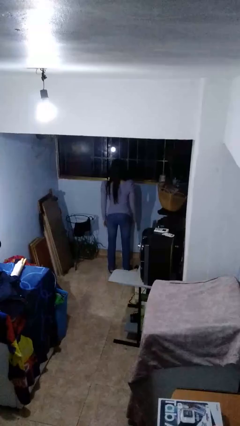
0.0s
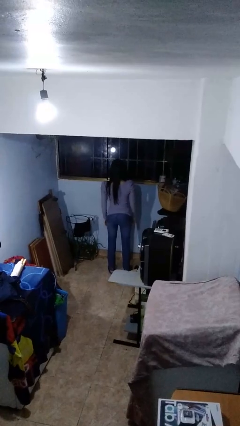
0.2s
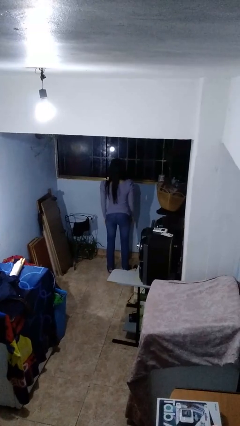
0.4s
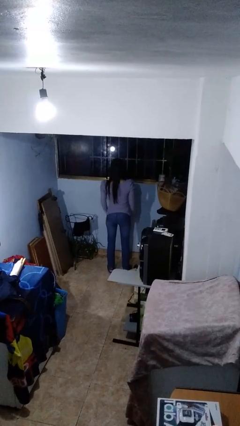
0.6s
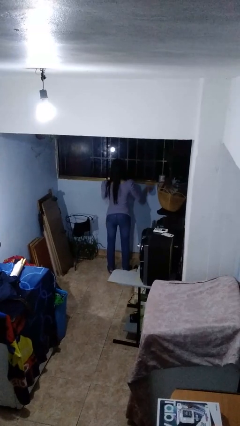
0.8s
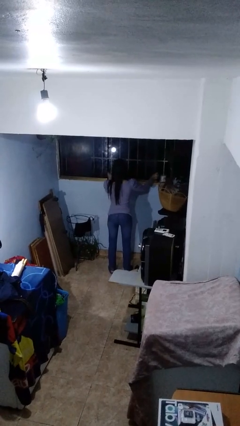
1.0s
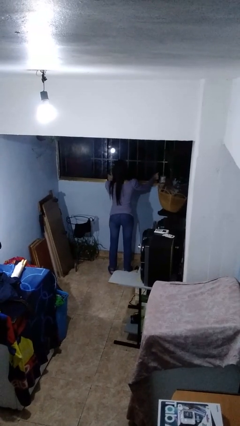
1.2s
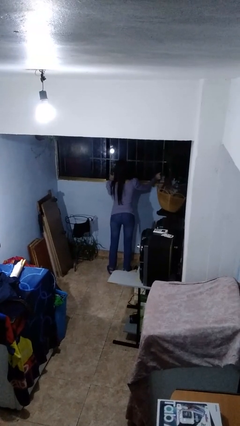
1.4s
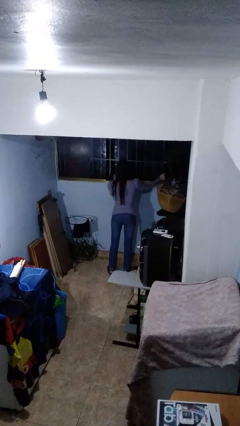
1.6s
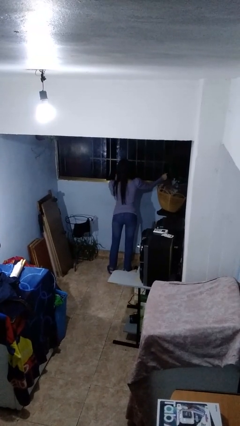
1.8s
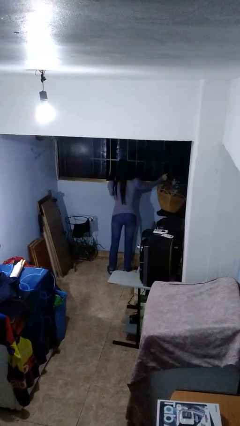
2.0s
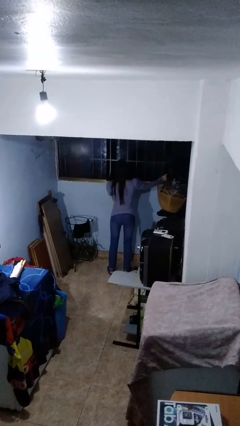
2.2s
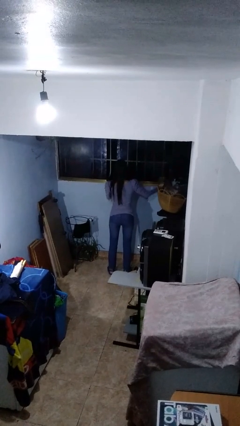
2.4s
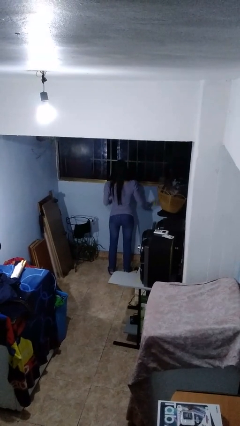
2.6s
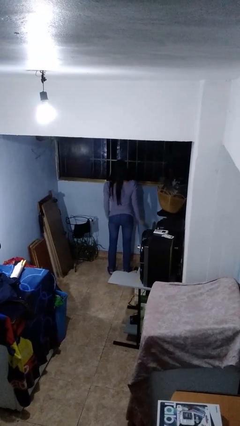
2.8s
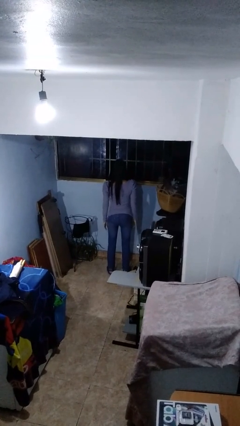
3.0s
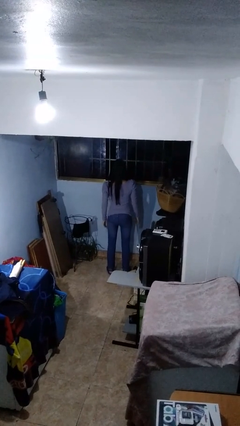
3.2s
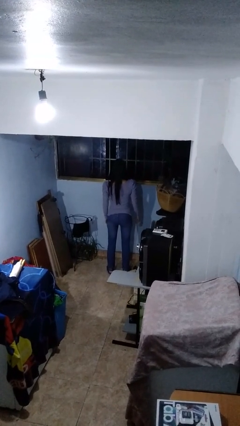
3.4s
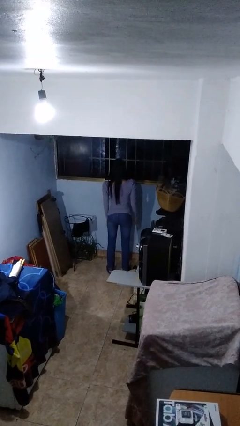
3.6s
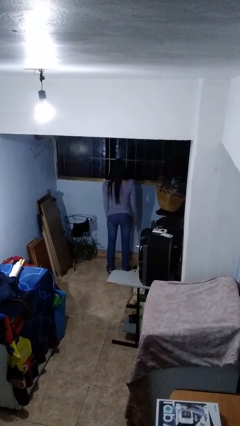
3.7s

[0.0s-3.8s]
person opens home window

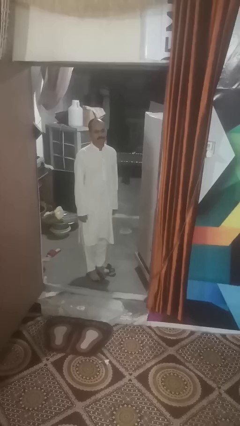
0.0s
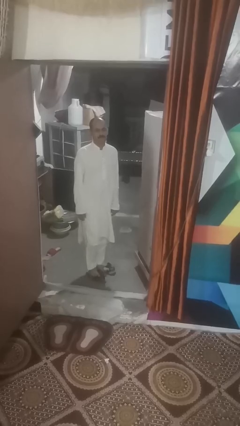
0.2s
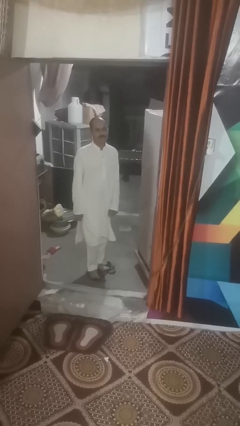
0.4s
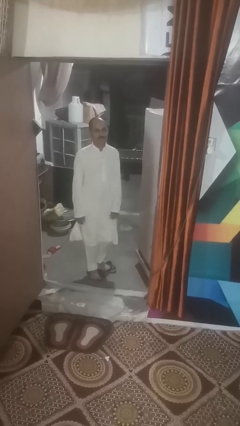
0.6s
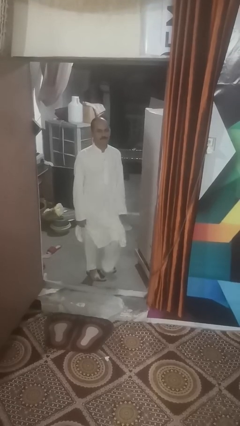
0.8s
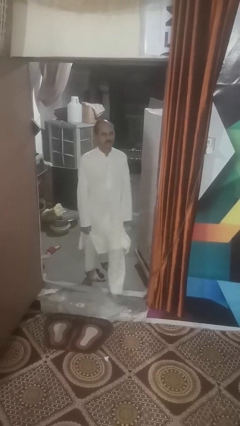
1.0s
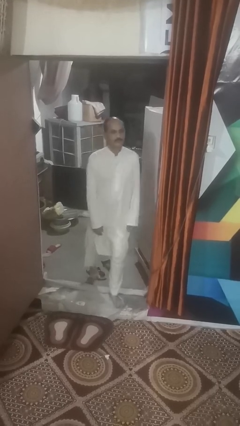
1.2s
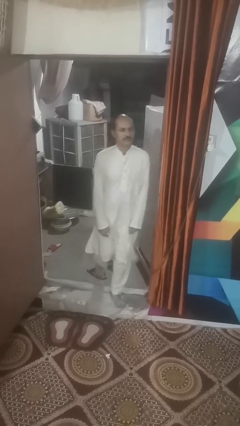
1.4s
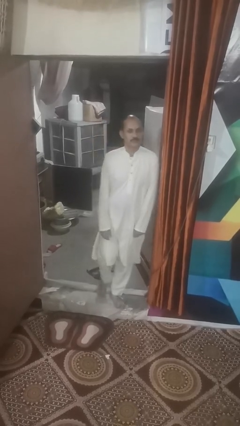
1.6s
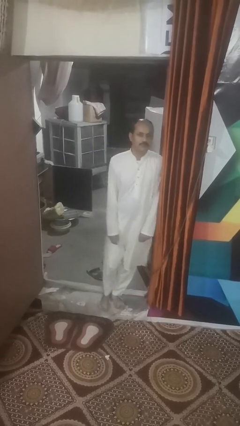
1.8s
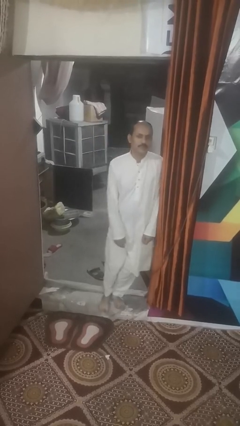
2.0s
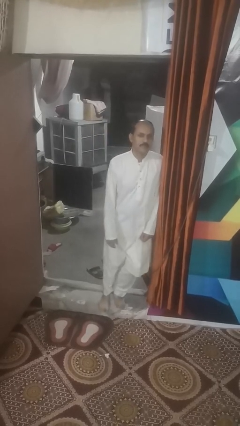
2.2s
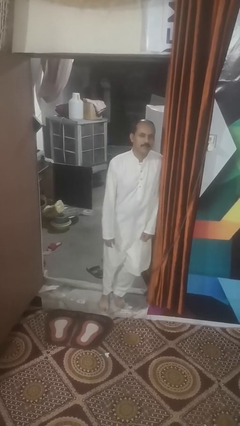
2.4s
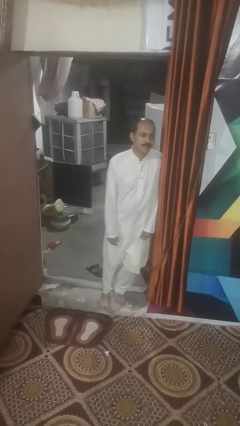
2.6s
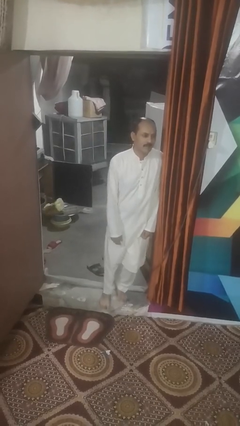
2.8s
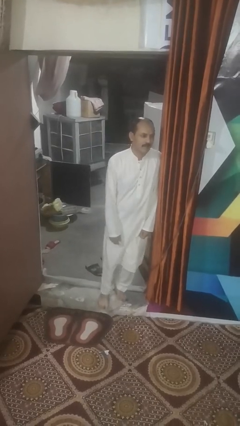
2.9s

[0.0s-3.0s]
person bumps into wall

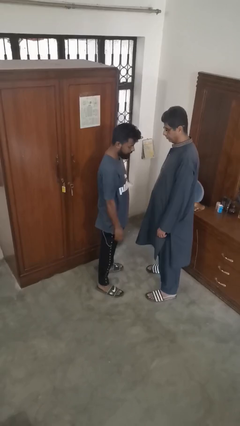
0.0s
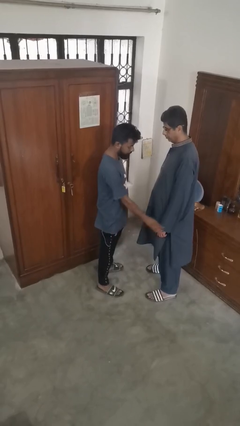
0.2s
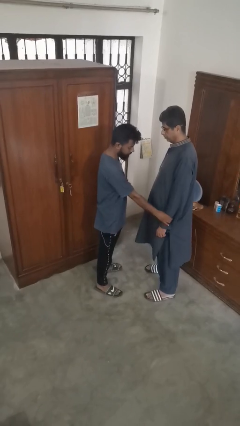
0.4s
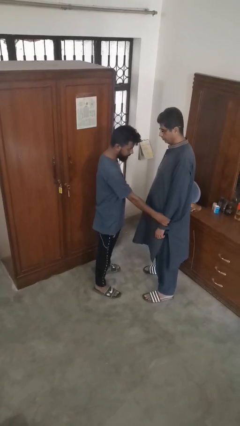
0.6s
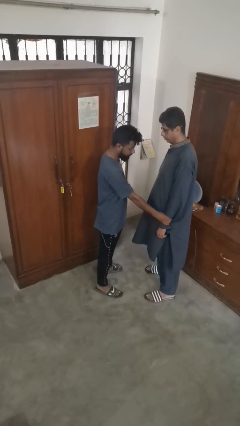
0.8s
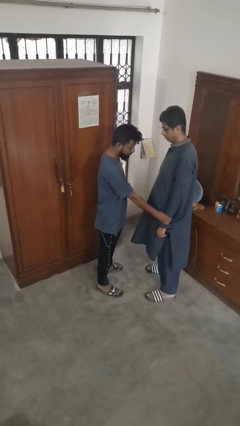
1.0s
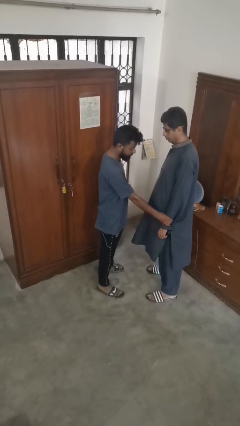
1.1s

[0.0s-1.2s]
person grabs person by forearm

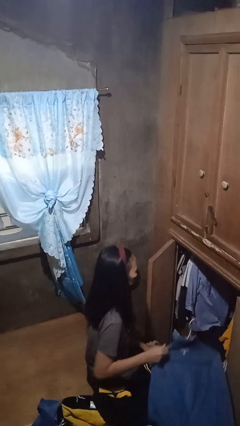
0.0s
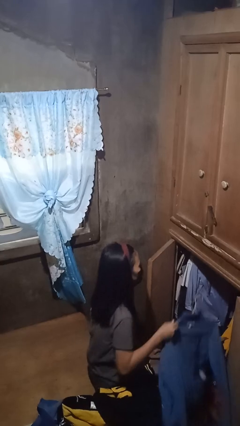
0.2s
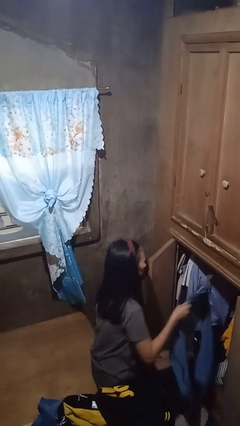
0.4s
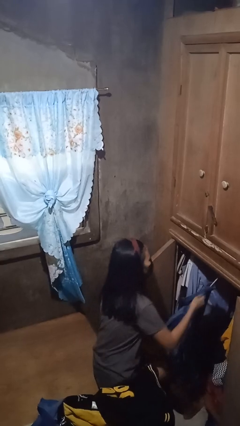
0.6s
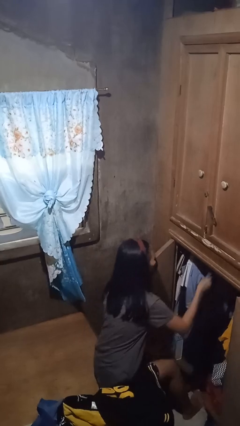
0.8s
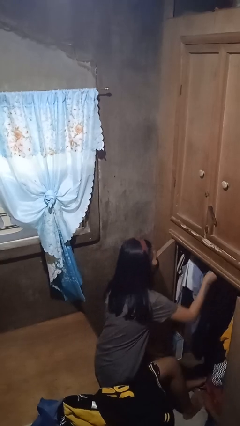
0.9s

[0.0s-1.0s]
person puts clothes into closet

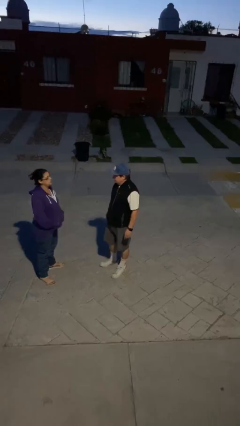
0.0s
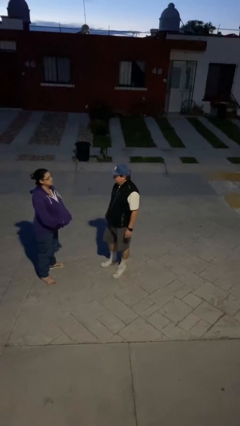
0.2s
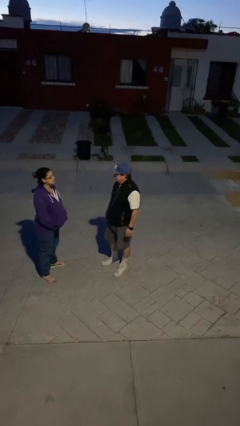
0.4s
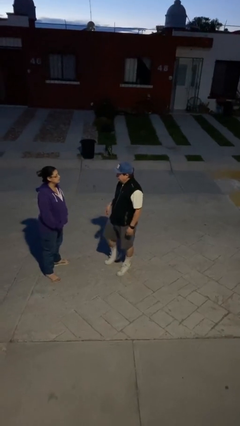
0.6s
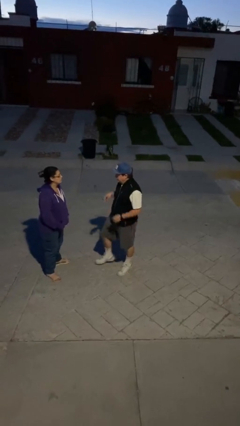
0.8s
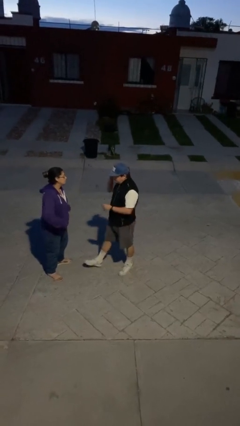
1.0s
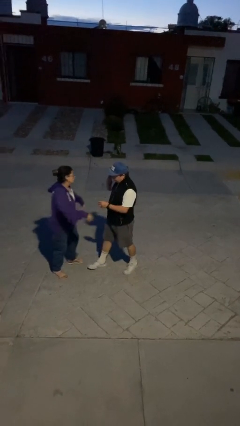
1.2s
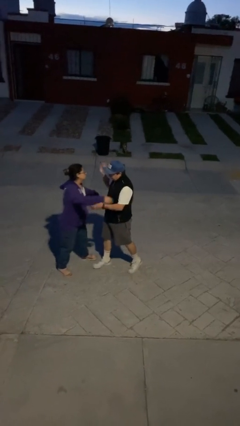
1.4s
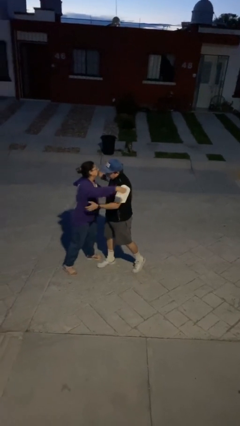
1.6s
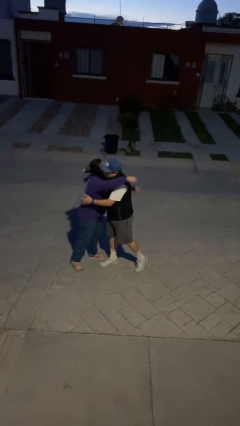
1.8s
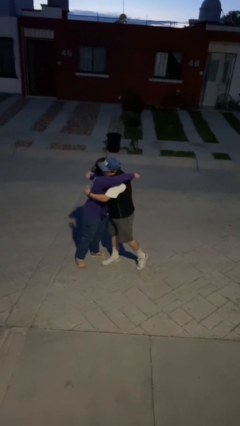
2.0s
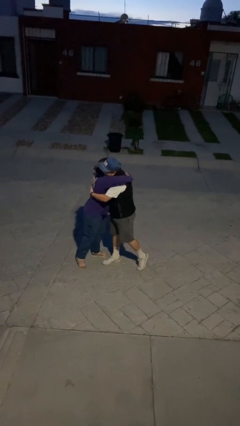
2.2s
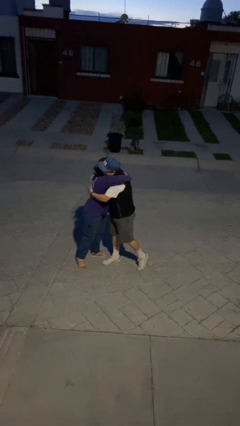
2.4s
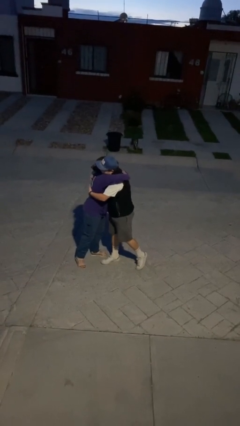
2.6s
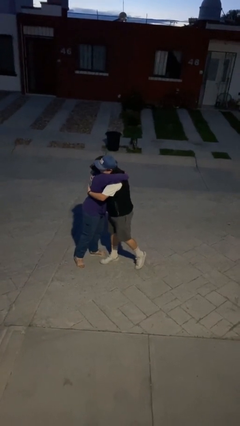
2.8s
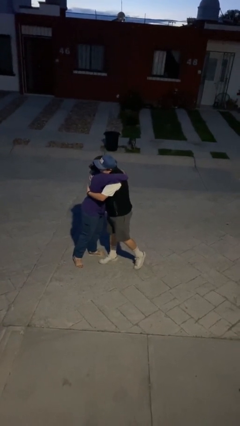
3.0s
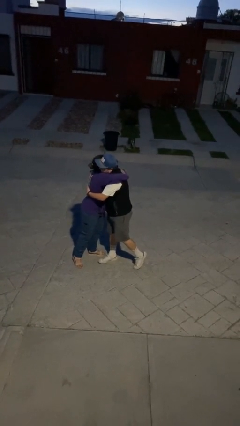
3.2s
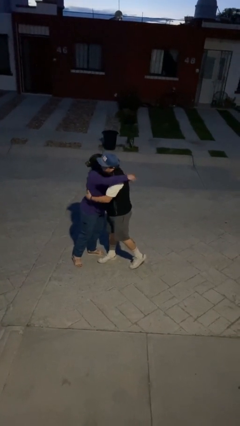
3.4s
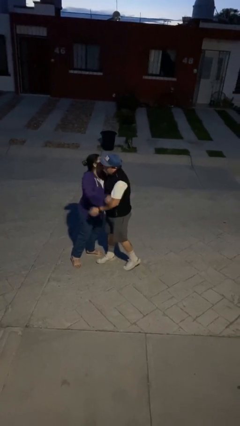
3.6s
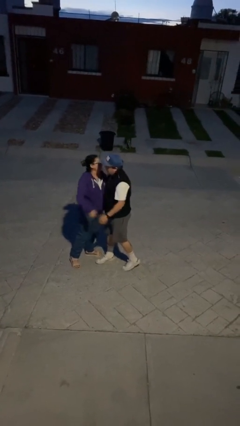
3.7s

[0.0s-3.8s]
person embraces person

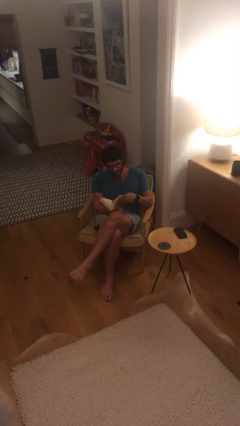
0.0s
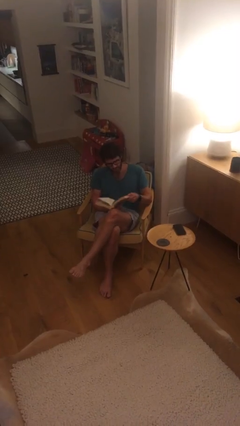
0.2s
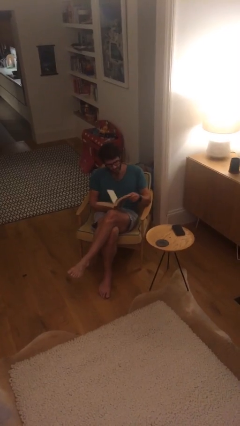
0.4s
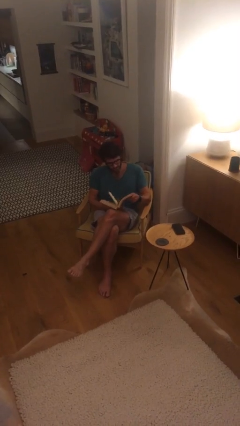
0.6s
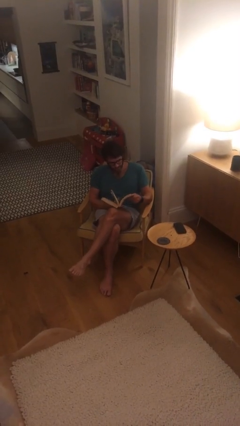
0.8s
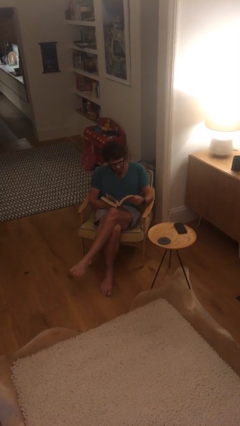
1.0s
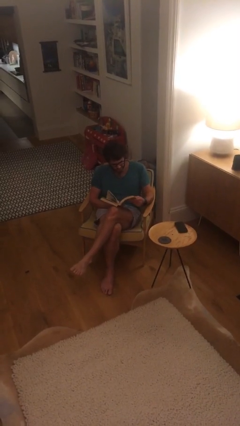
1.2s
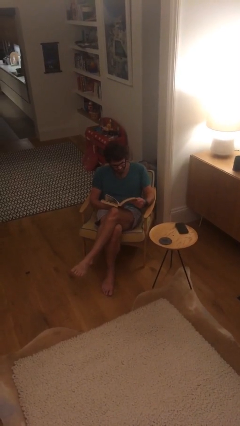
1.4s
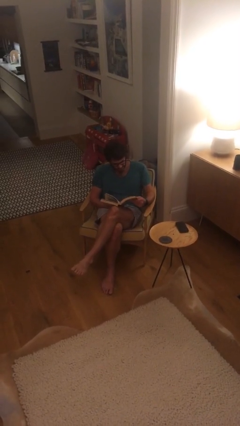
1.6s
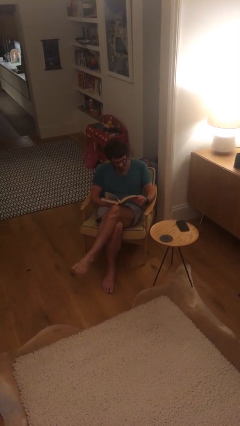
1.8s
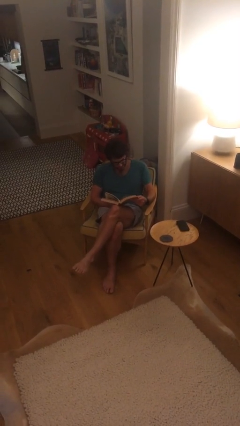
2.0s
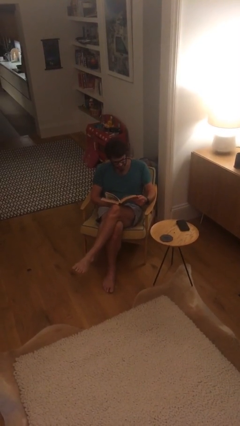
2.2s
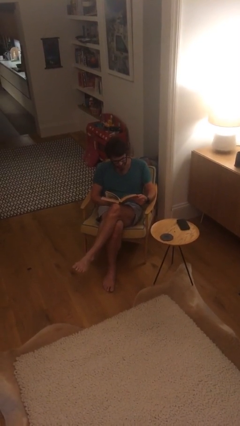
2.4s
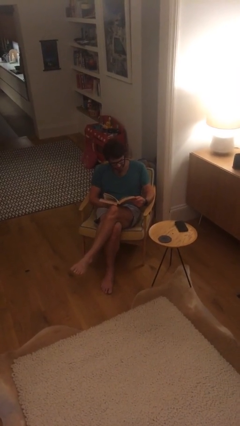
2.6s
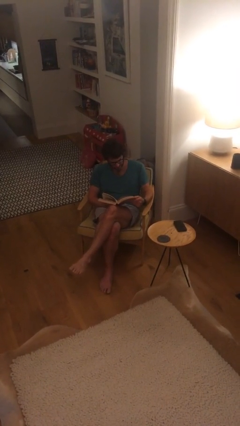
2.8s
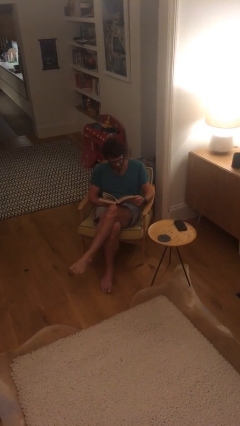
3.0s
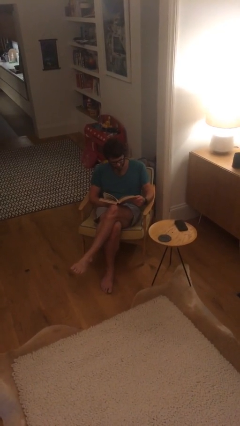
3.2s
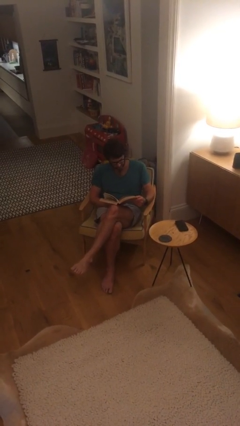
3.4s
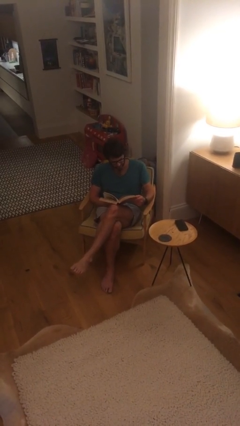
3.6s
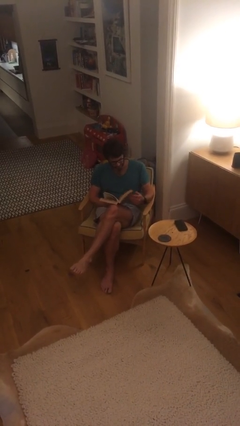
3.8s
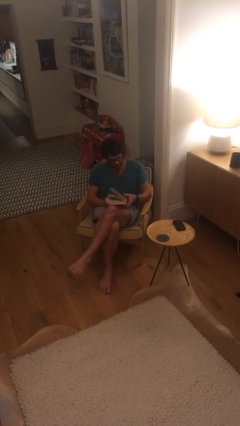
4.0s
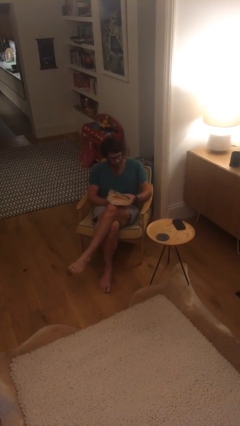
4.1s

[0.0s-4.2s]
person reads document

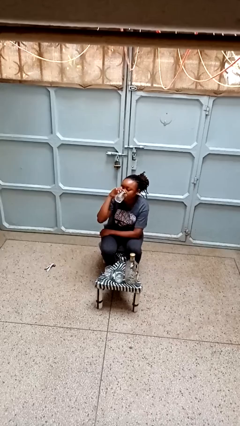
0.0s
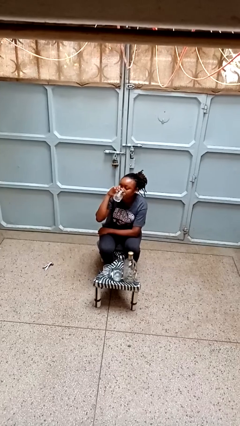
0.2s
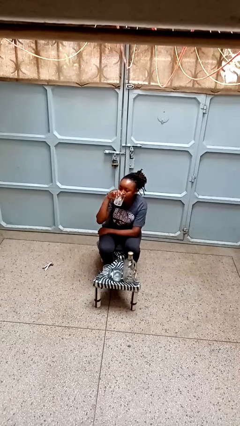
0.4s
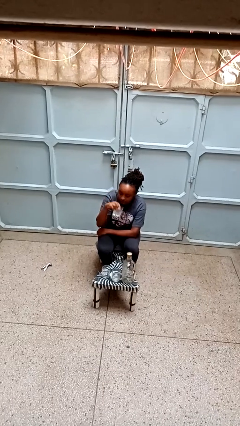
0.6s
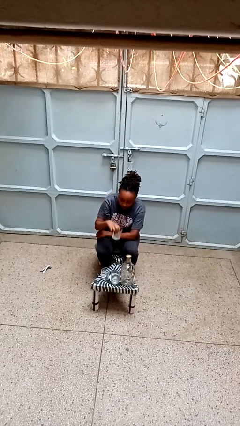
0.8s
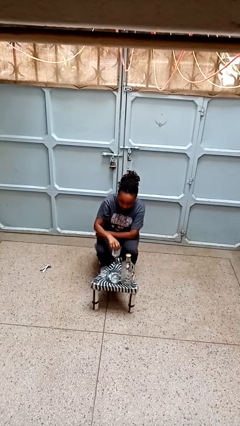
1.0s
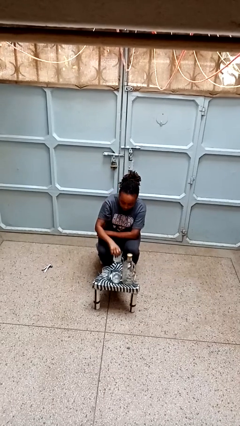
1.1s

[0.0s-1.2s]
person puts down object on table
